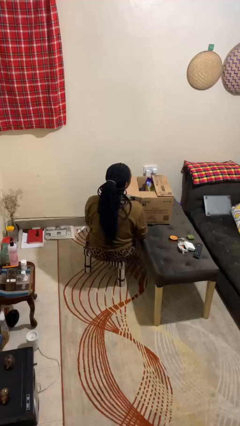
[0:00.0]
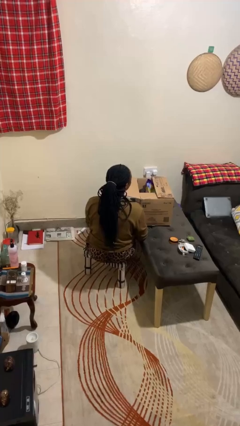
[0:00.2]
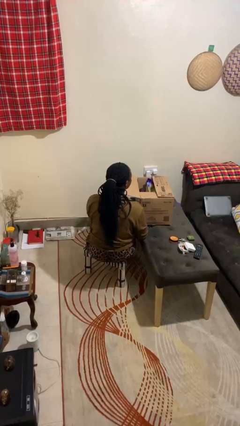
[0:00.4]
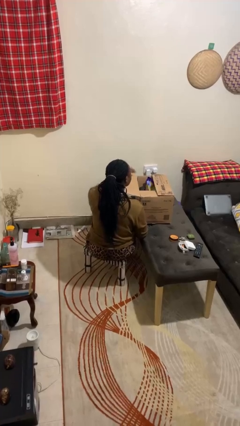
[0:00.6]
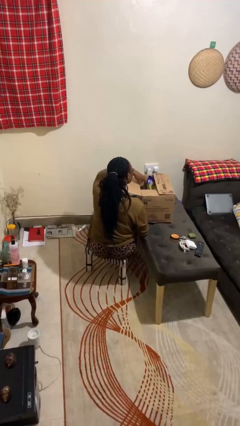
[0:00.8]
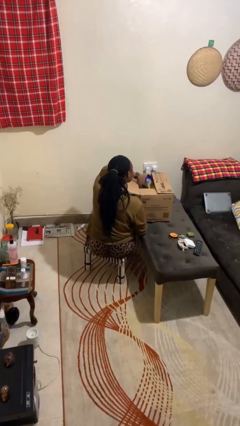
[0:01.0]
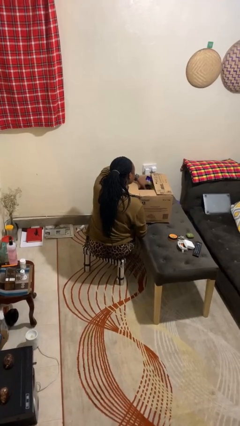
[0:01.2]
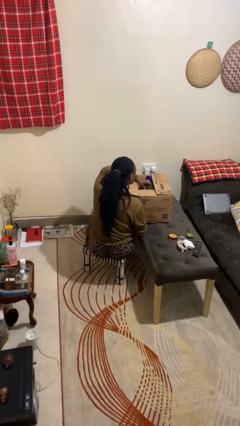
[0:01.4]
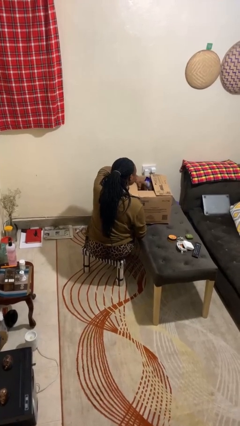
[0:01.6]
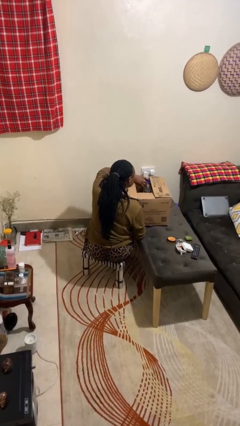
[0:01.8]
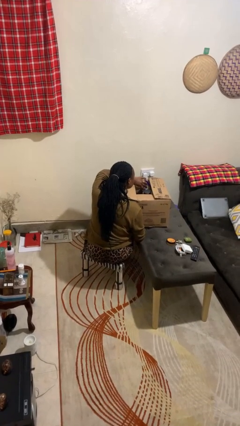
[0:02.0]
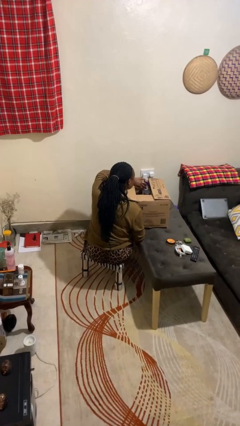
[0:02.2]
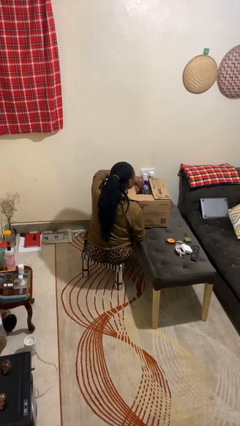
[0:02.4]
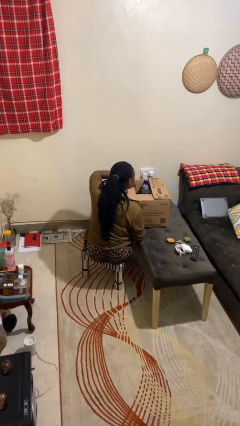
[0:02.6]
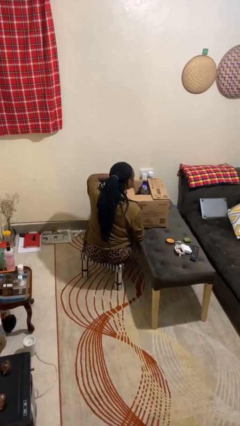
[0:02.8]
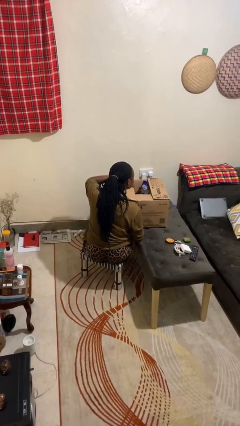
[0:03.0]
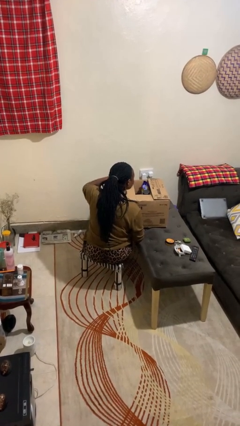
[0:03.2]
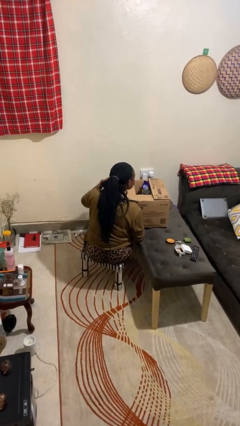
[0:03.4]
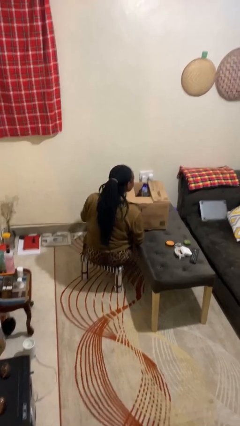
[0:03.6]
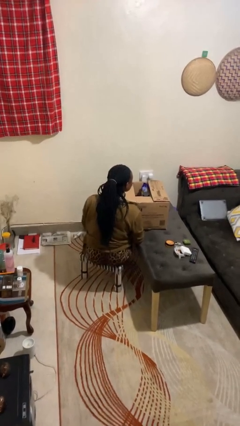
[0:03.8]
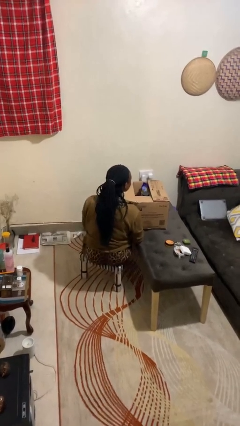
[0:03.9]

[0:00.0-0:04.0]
person searches in box

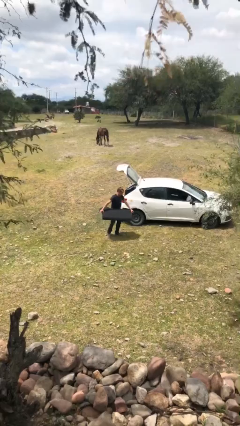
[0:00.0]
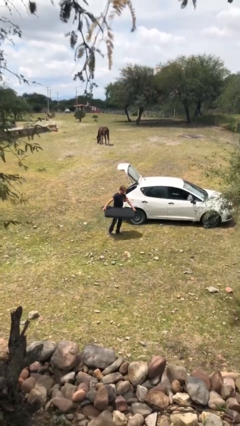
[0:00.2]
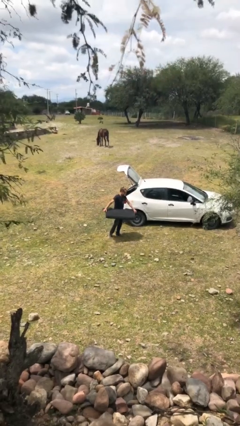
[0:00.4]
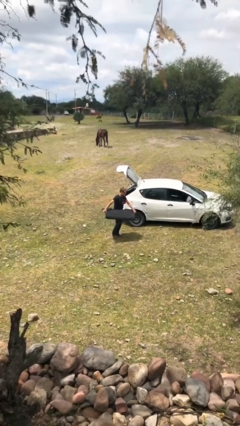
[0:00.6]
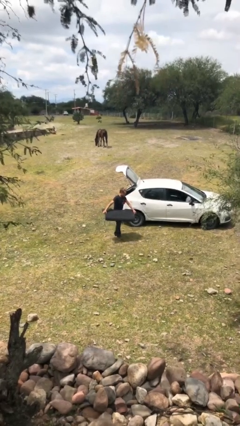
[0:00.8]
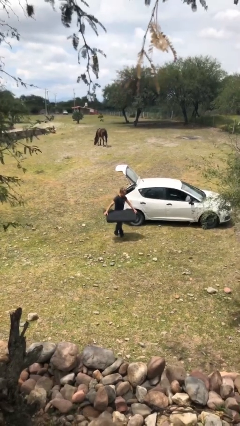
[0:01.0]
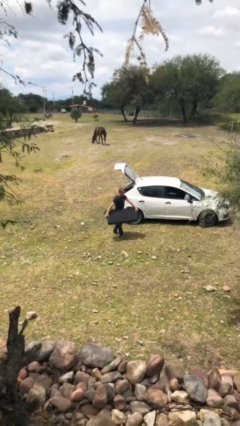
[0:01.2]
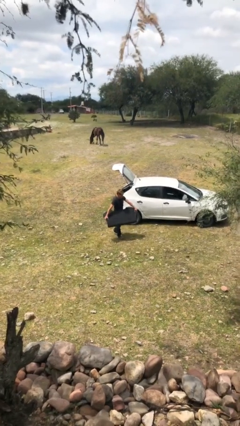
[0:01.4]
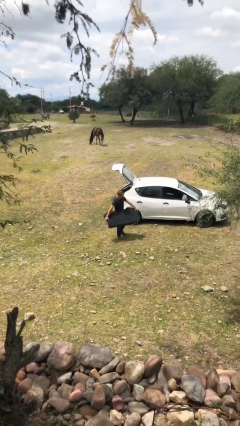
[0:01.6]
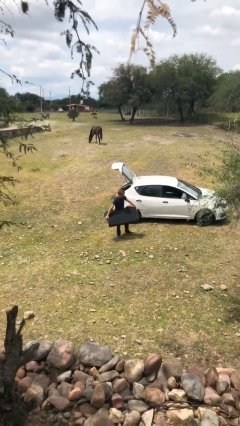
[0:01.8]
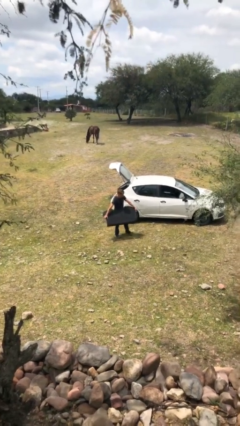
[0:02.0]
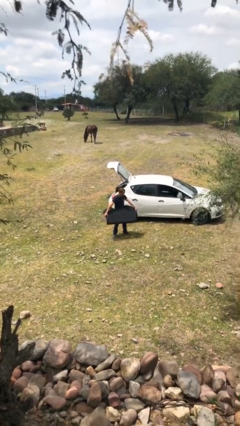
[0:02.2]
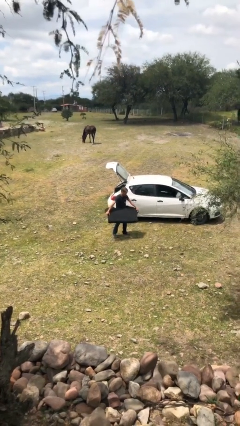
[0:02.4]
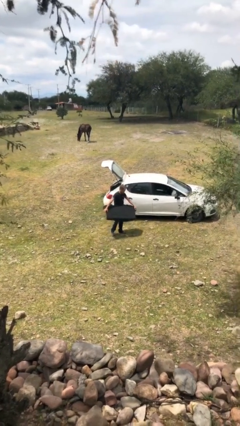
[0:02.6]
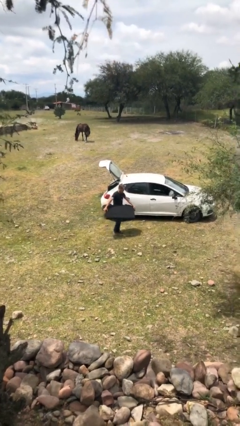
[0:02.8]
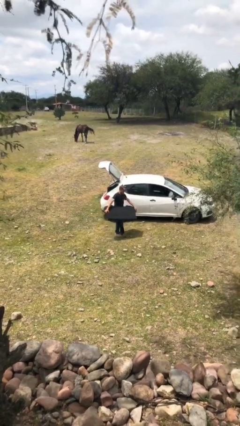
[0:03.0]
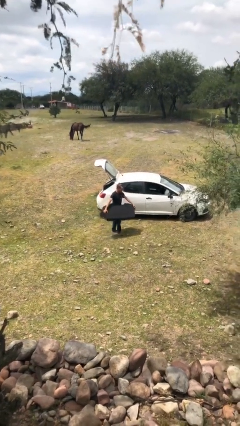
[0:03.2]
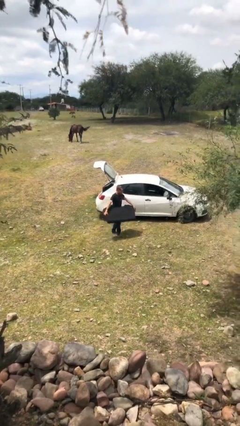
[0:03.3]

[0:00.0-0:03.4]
person carries heavy object

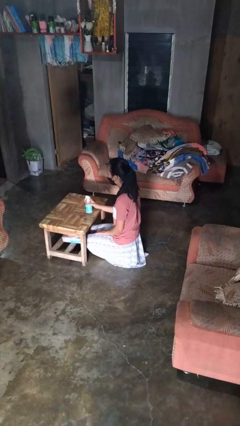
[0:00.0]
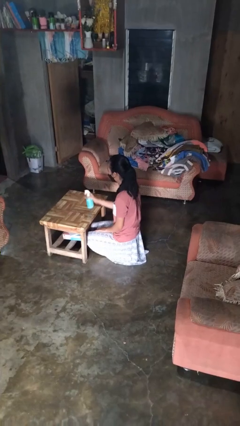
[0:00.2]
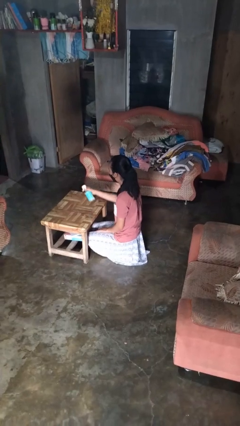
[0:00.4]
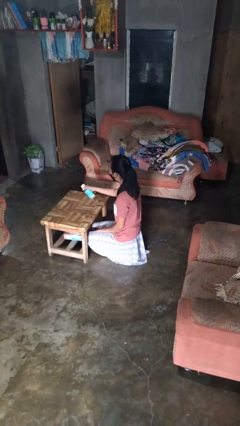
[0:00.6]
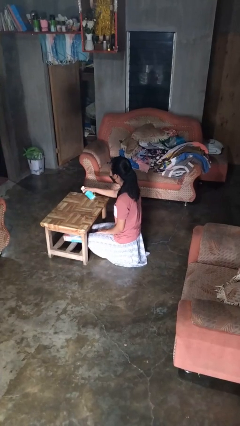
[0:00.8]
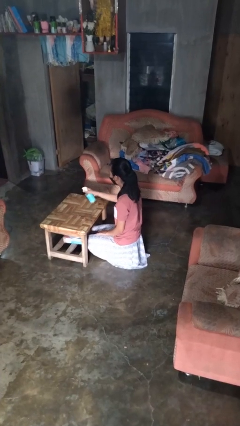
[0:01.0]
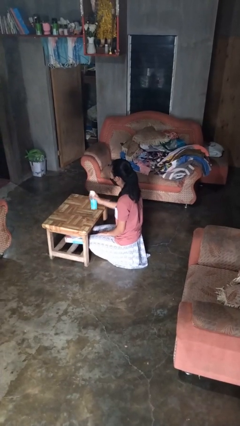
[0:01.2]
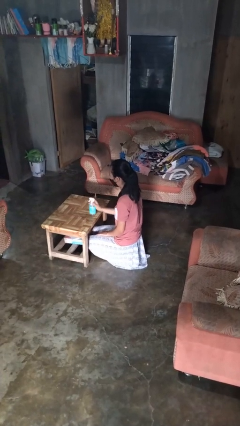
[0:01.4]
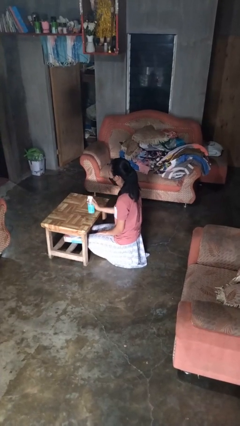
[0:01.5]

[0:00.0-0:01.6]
person sprays from bottle

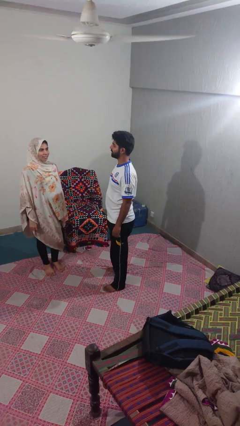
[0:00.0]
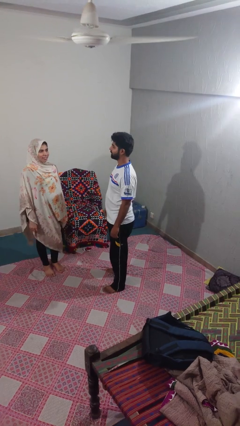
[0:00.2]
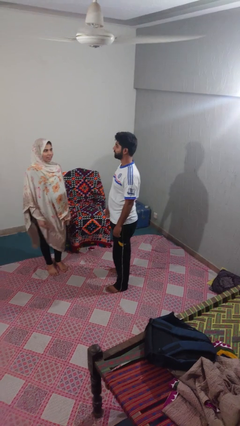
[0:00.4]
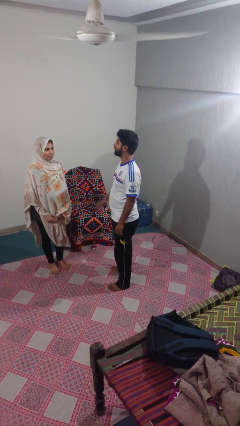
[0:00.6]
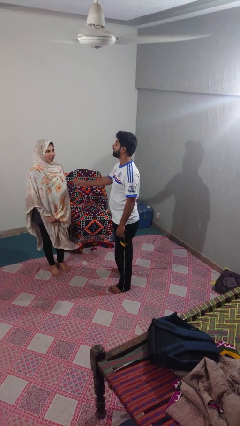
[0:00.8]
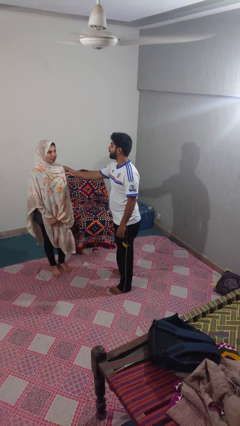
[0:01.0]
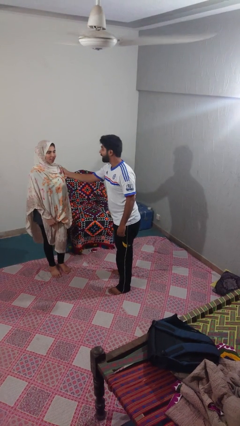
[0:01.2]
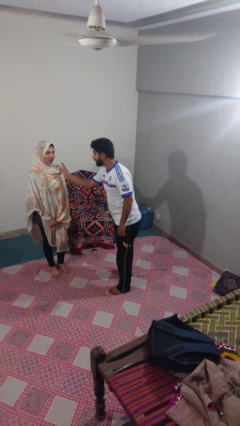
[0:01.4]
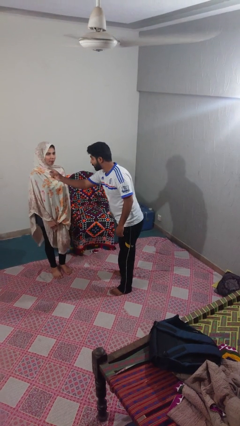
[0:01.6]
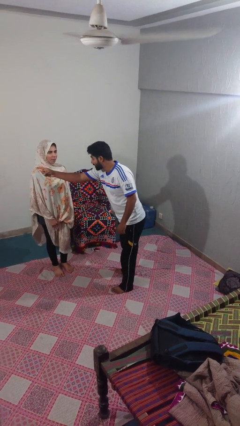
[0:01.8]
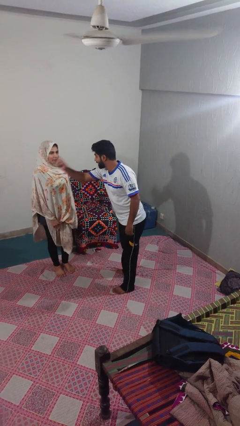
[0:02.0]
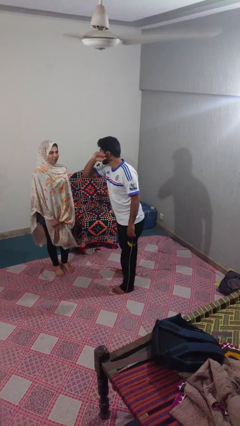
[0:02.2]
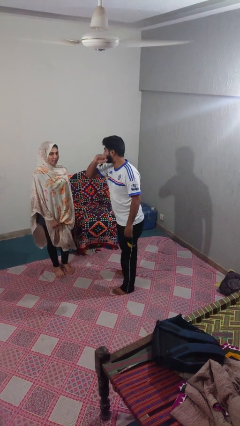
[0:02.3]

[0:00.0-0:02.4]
person shoves person

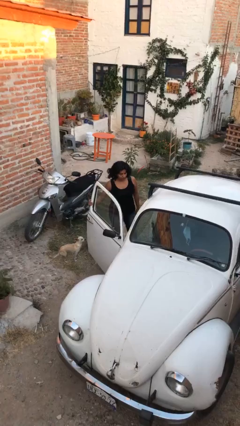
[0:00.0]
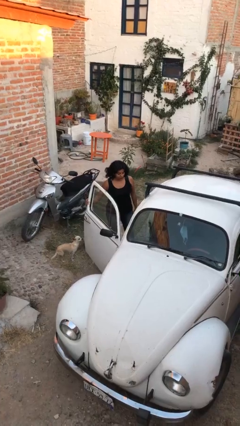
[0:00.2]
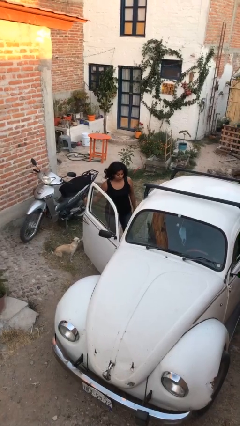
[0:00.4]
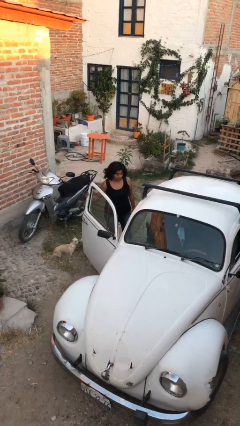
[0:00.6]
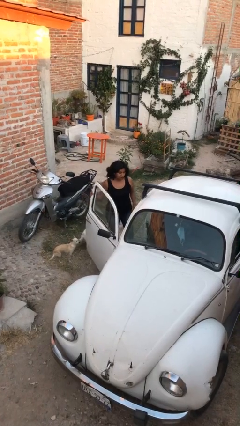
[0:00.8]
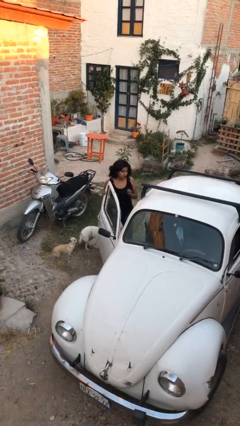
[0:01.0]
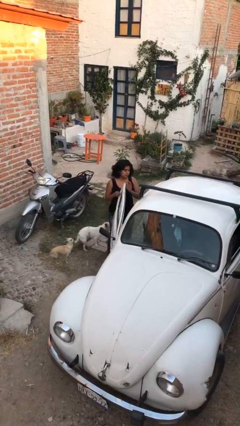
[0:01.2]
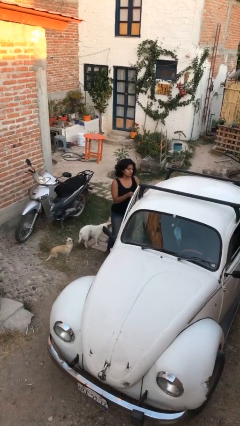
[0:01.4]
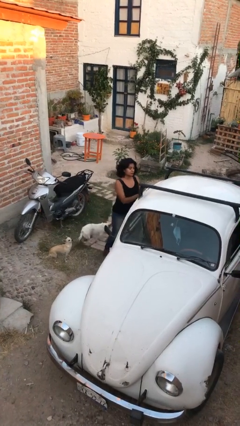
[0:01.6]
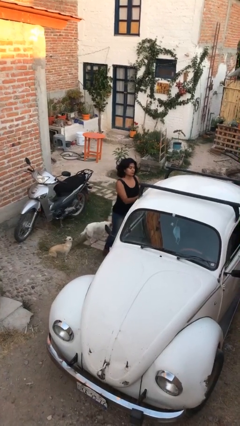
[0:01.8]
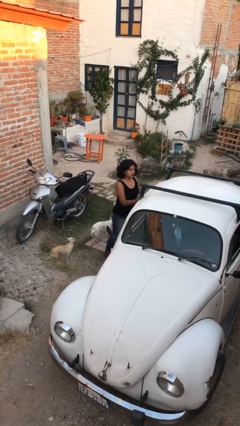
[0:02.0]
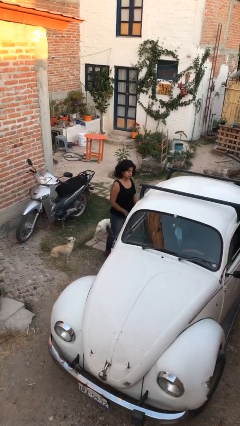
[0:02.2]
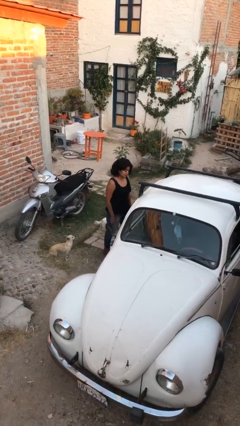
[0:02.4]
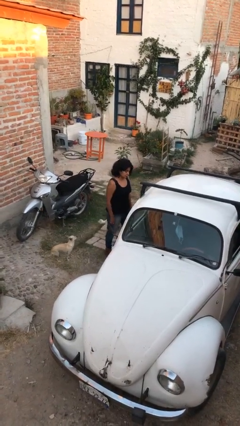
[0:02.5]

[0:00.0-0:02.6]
person closes car door

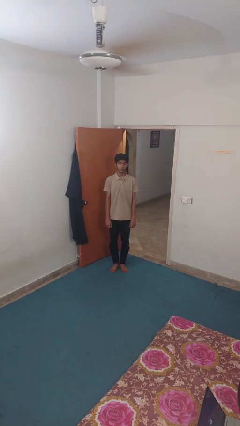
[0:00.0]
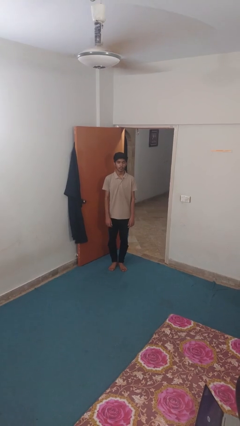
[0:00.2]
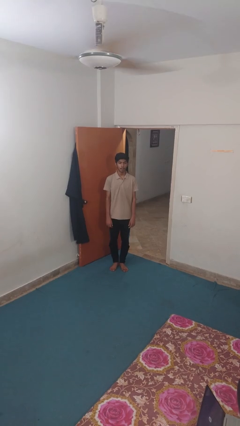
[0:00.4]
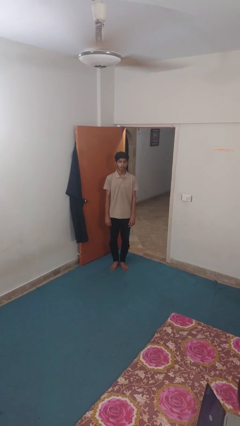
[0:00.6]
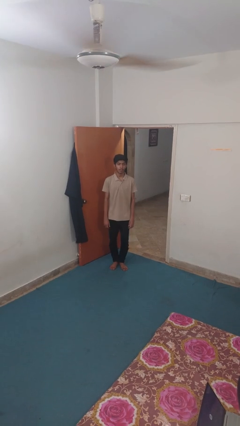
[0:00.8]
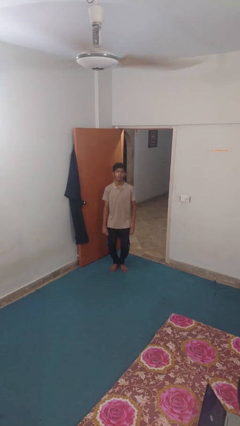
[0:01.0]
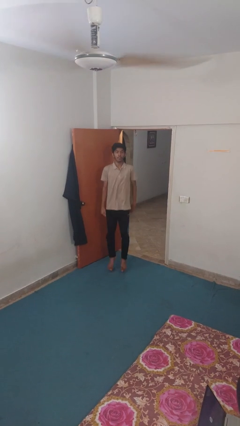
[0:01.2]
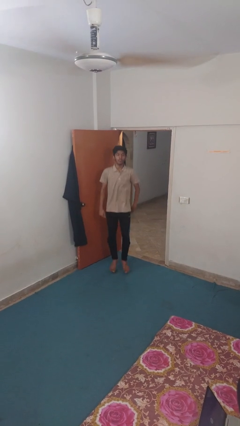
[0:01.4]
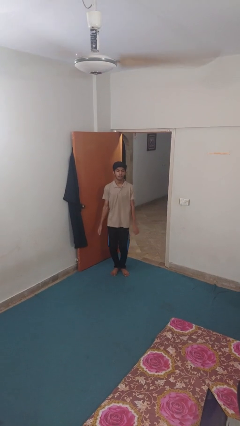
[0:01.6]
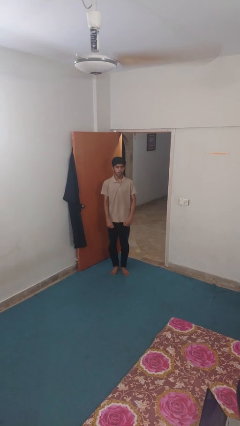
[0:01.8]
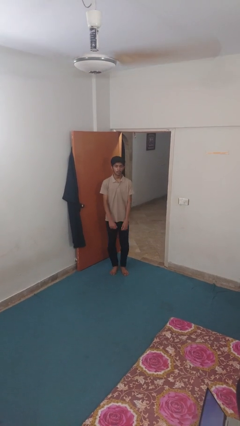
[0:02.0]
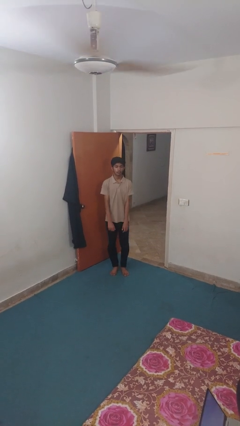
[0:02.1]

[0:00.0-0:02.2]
person jumps

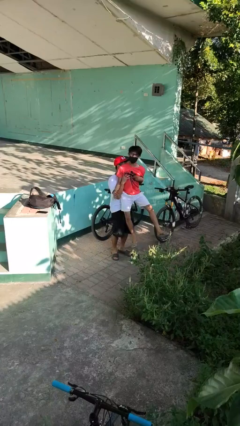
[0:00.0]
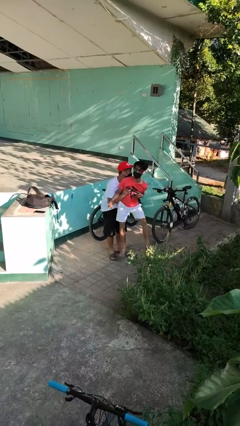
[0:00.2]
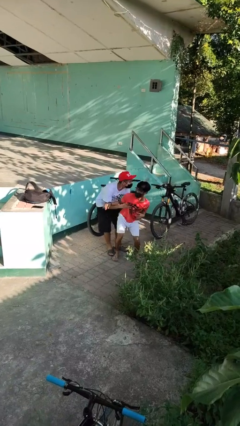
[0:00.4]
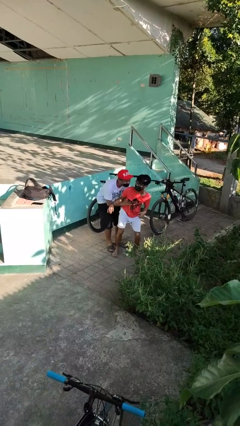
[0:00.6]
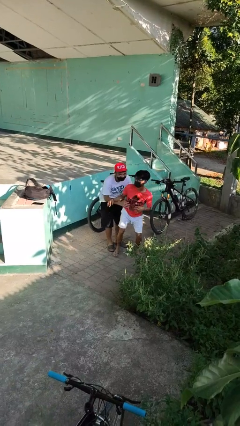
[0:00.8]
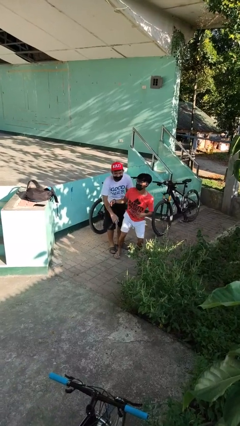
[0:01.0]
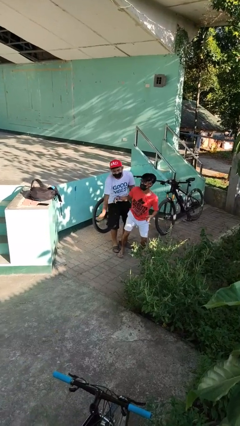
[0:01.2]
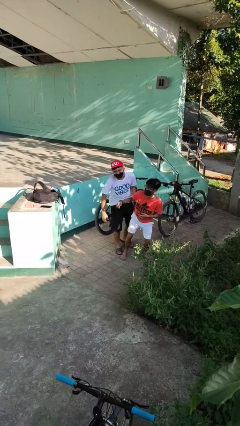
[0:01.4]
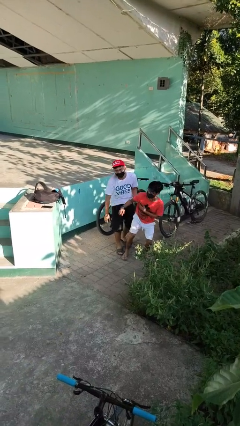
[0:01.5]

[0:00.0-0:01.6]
person puts down person
